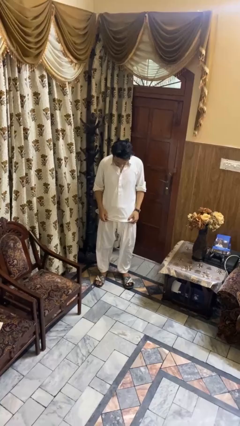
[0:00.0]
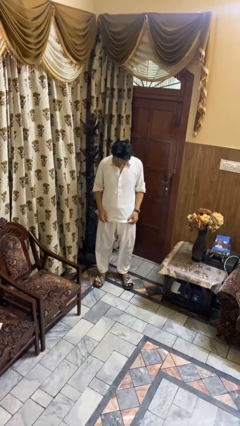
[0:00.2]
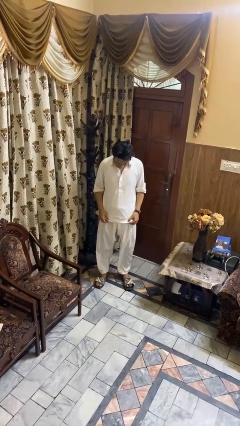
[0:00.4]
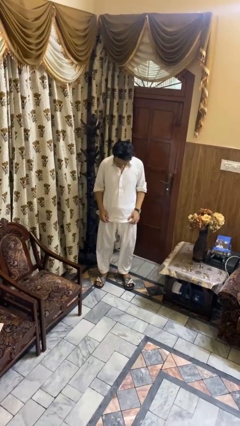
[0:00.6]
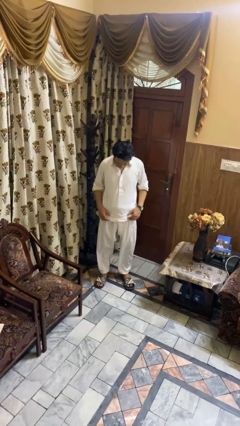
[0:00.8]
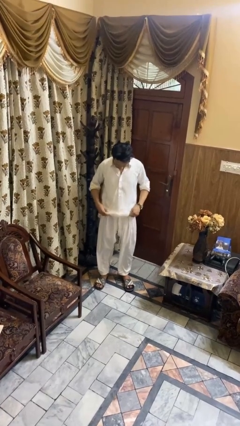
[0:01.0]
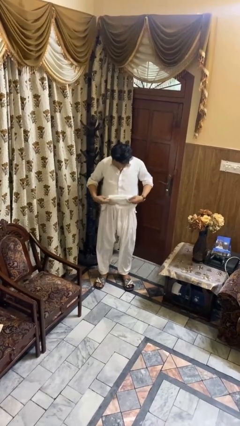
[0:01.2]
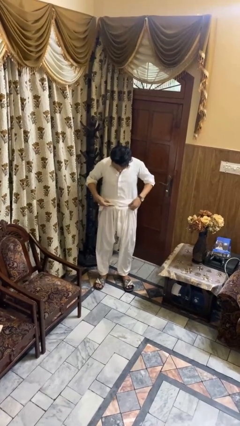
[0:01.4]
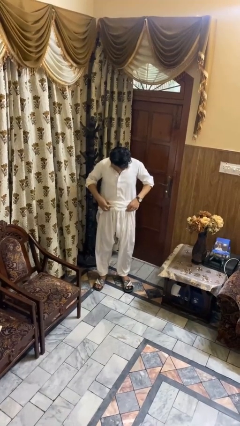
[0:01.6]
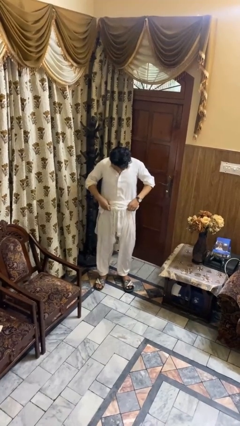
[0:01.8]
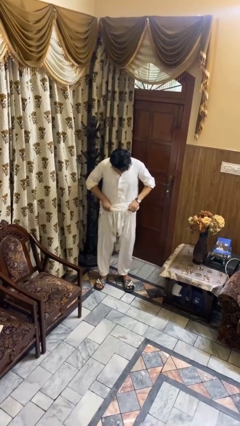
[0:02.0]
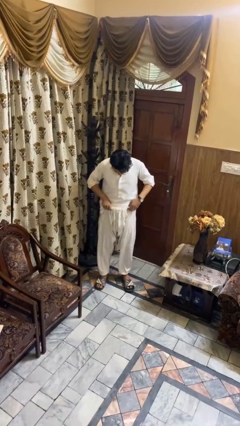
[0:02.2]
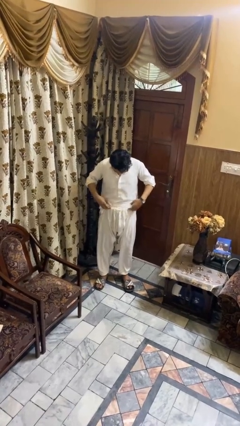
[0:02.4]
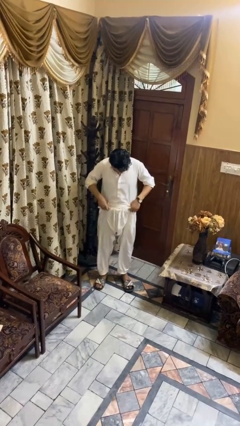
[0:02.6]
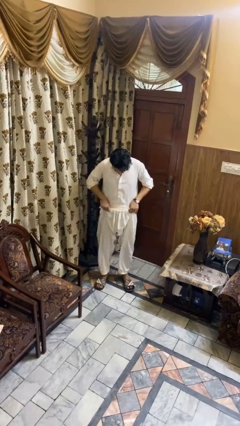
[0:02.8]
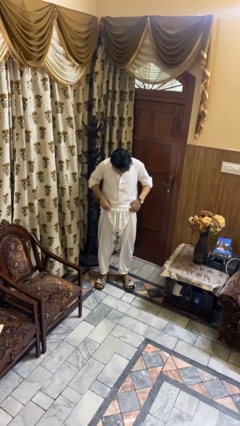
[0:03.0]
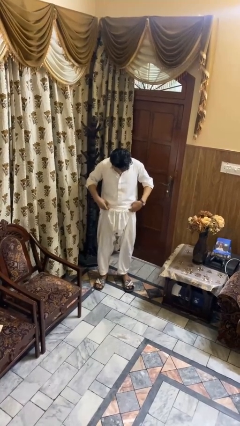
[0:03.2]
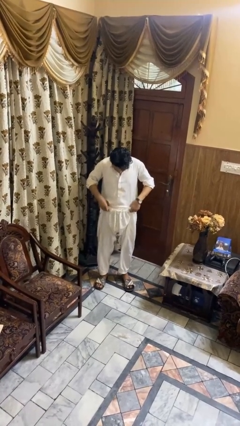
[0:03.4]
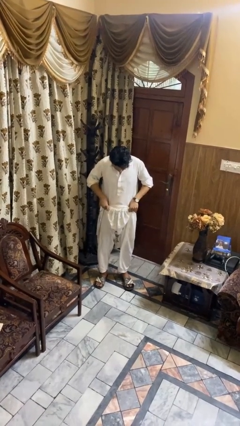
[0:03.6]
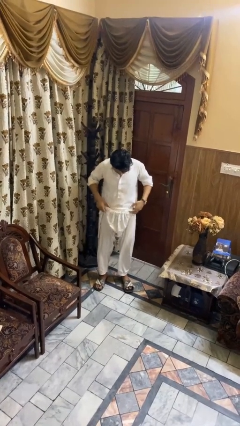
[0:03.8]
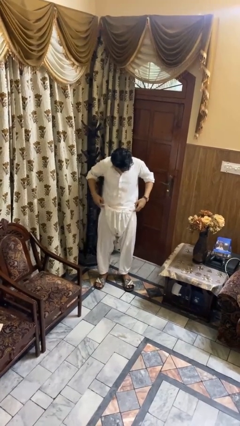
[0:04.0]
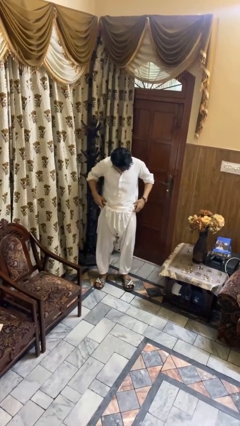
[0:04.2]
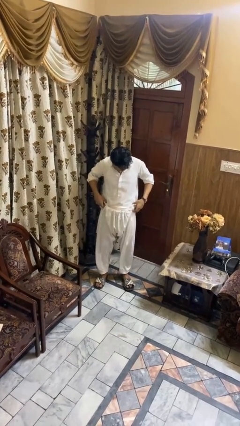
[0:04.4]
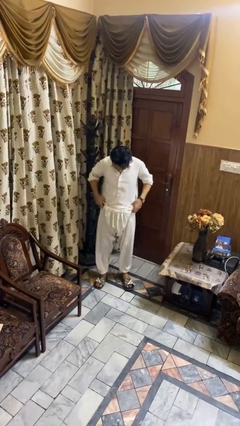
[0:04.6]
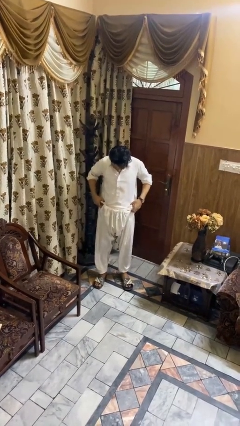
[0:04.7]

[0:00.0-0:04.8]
person tucks in shirt

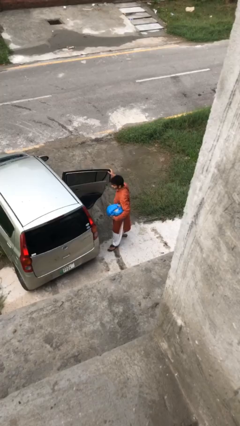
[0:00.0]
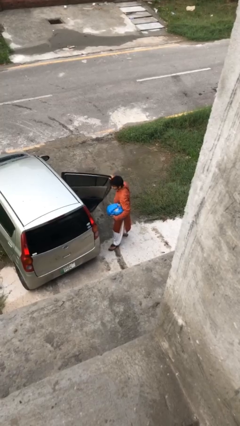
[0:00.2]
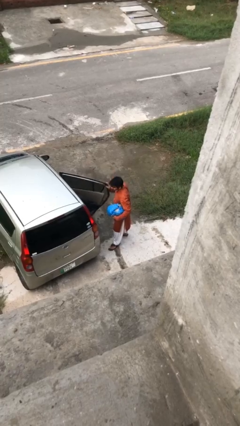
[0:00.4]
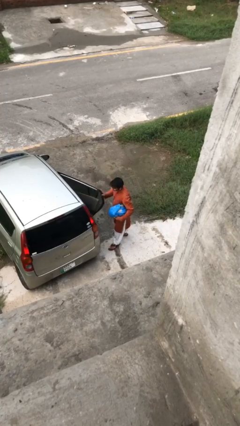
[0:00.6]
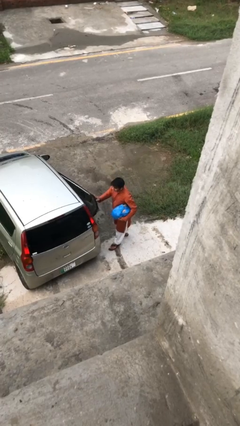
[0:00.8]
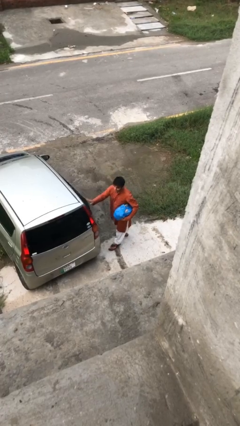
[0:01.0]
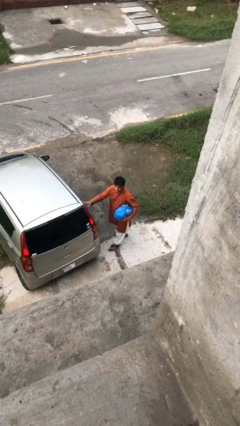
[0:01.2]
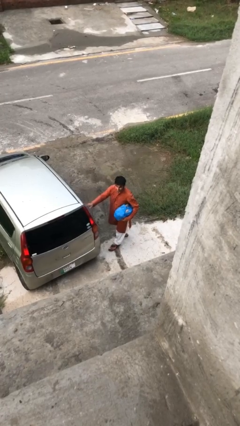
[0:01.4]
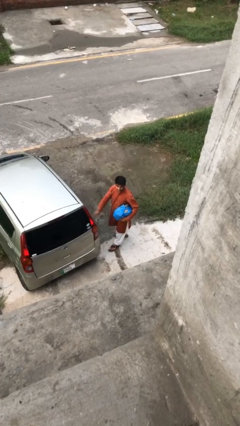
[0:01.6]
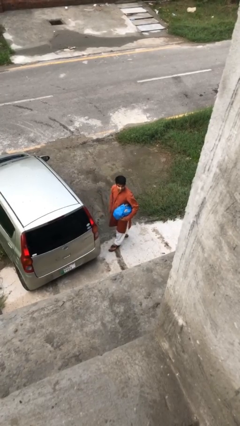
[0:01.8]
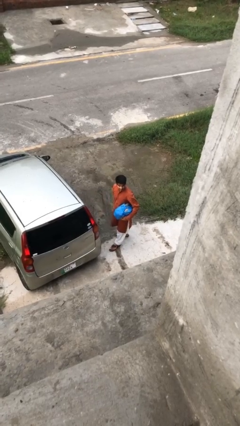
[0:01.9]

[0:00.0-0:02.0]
person closes car door

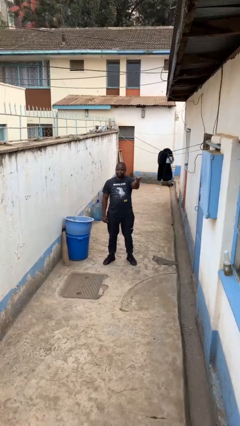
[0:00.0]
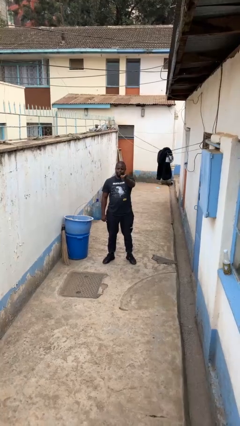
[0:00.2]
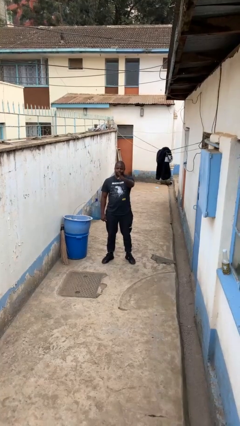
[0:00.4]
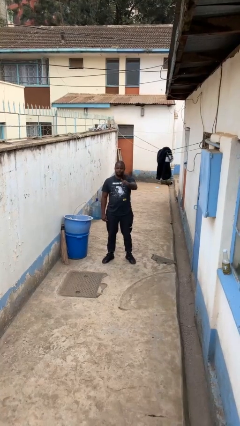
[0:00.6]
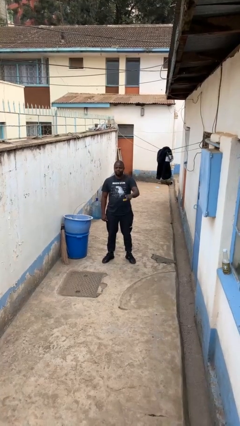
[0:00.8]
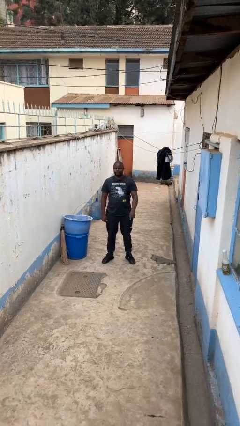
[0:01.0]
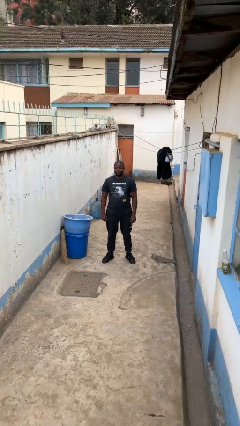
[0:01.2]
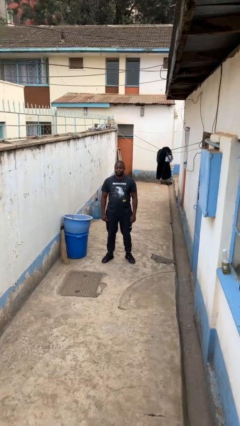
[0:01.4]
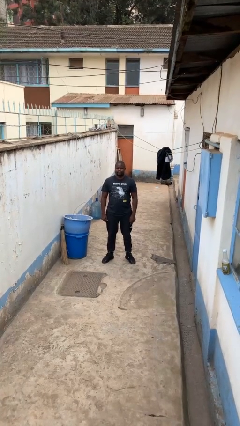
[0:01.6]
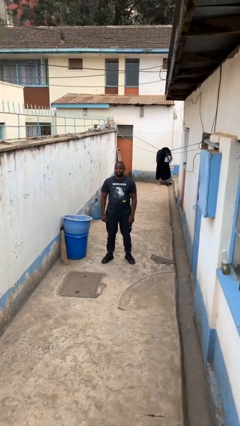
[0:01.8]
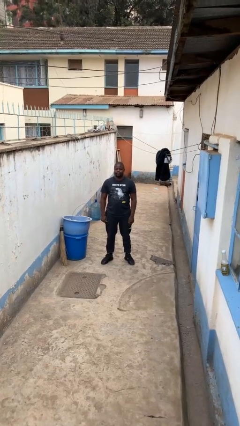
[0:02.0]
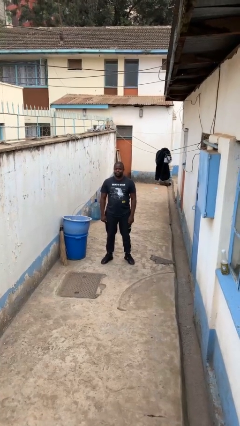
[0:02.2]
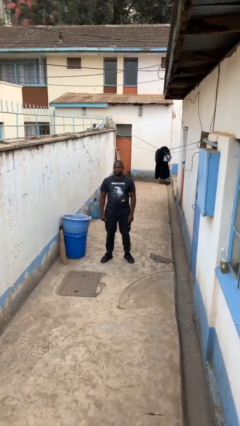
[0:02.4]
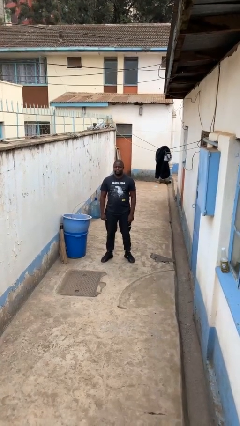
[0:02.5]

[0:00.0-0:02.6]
person gestures swipe right

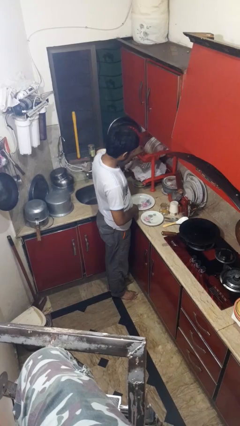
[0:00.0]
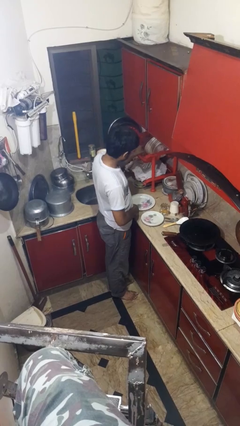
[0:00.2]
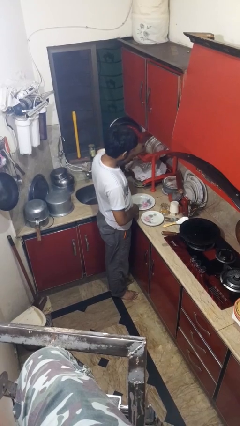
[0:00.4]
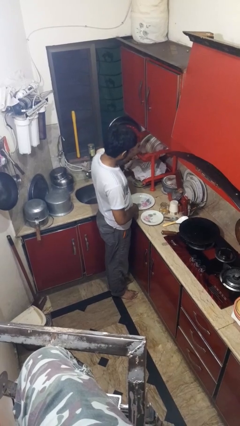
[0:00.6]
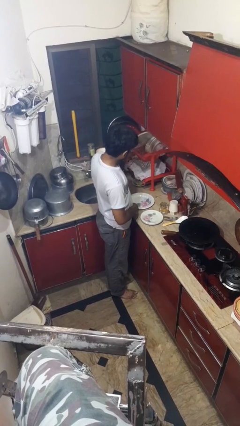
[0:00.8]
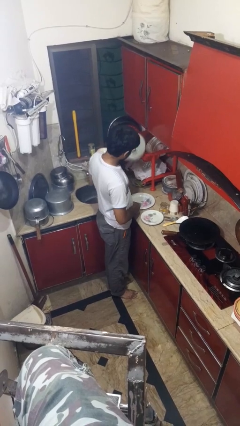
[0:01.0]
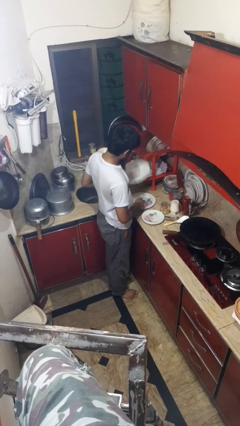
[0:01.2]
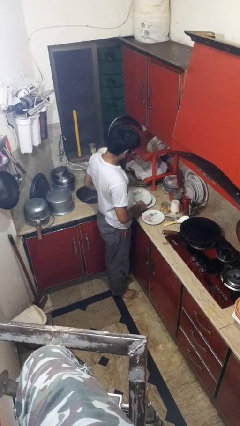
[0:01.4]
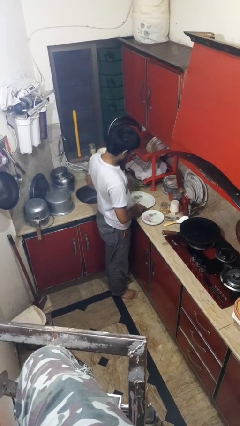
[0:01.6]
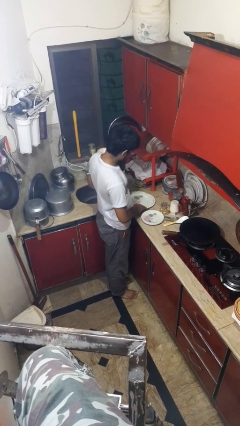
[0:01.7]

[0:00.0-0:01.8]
person unloads dishwasher

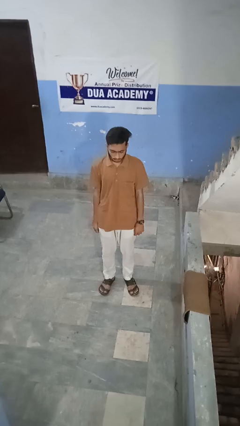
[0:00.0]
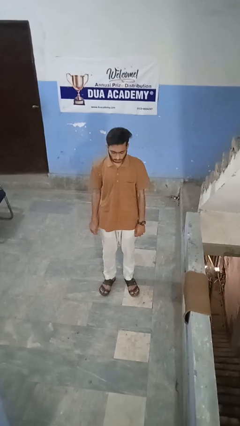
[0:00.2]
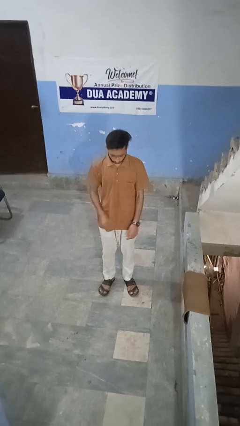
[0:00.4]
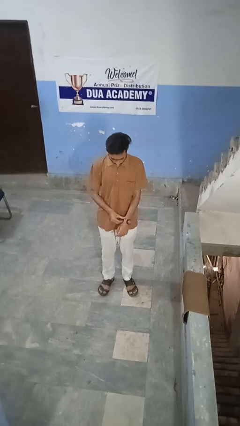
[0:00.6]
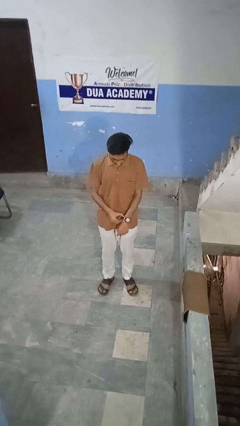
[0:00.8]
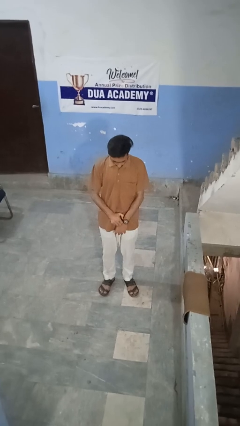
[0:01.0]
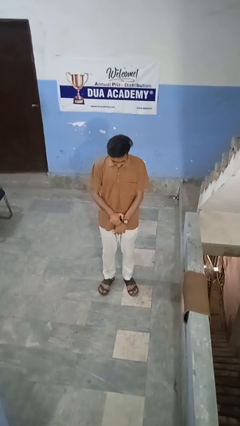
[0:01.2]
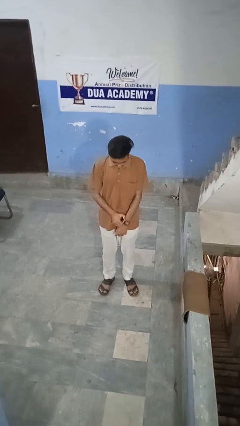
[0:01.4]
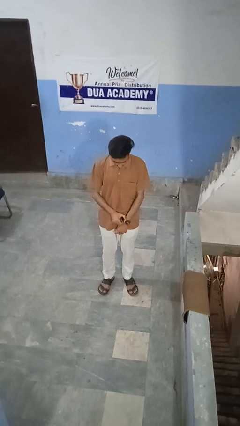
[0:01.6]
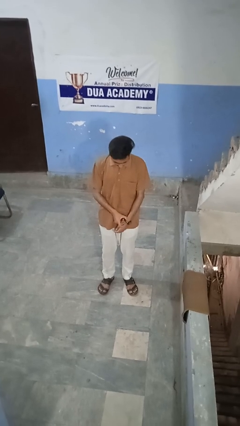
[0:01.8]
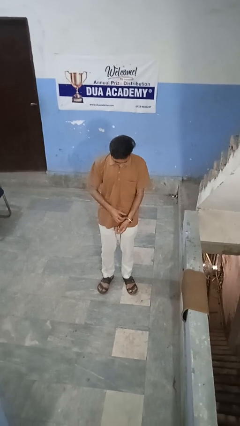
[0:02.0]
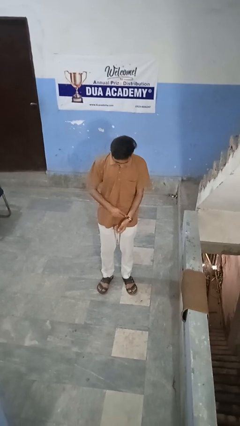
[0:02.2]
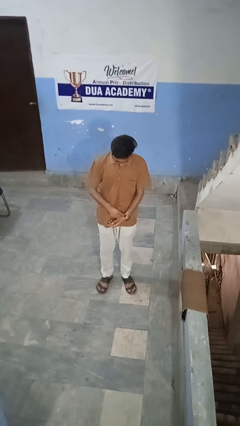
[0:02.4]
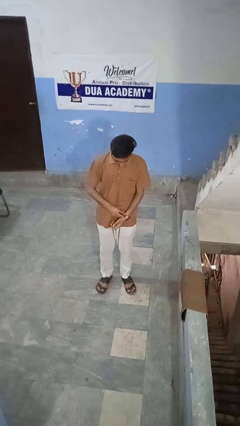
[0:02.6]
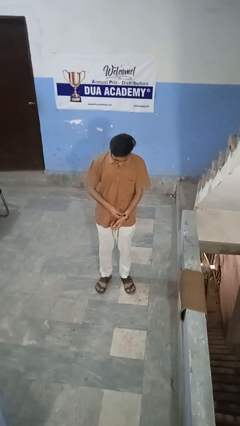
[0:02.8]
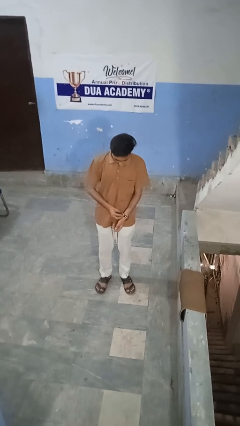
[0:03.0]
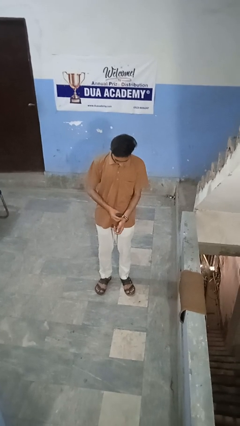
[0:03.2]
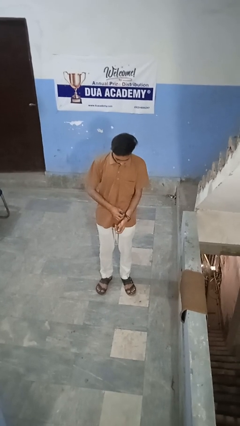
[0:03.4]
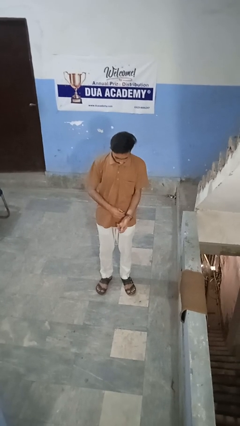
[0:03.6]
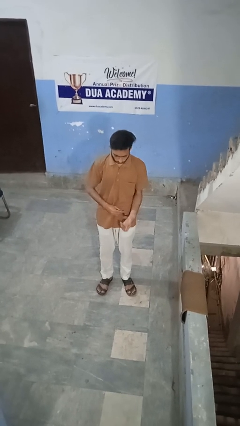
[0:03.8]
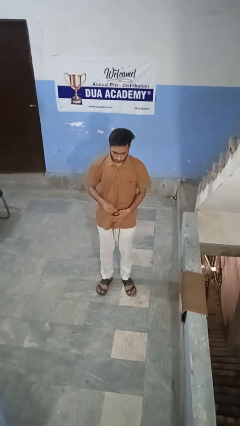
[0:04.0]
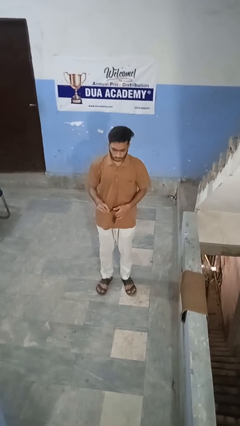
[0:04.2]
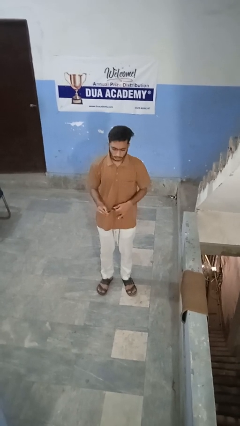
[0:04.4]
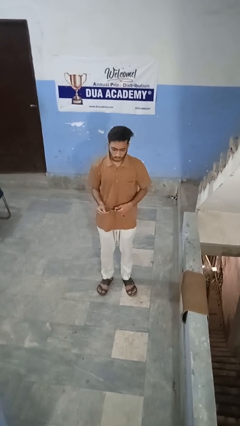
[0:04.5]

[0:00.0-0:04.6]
person takes off wristwatch

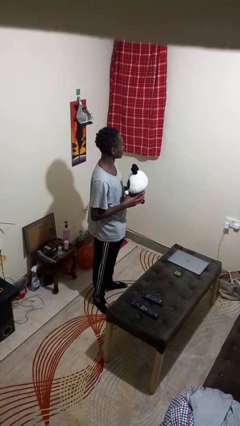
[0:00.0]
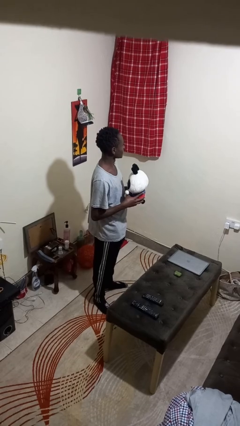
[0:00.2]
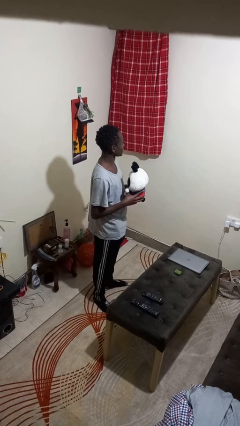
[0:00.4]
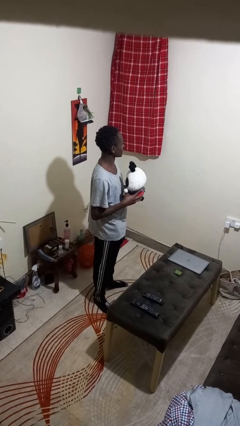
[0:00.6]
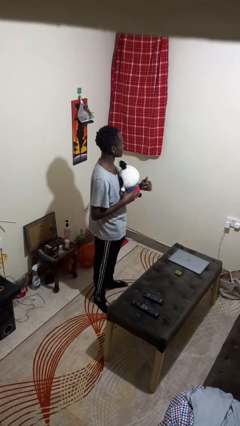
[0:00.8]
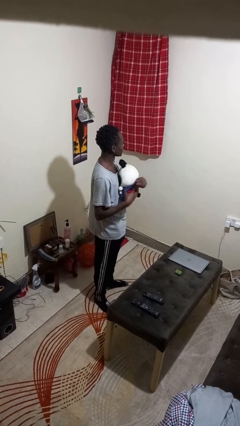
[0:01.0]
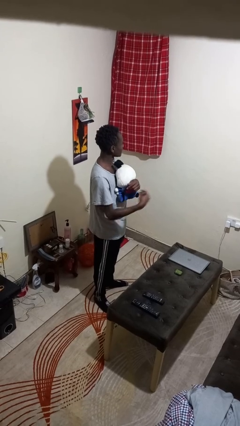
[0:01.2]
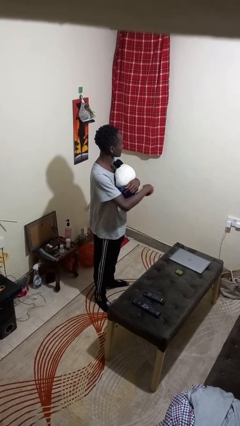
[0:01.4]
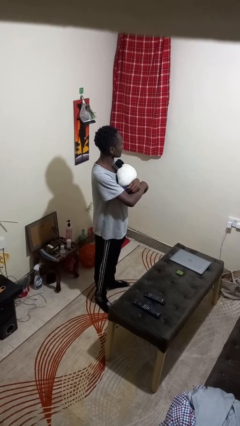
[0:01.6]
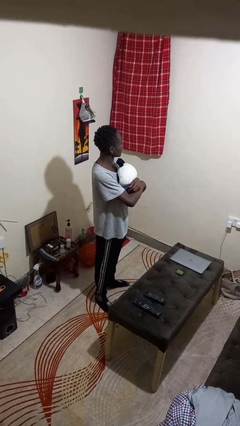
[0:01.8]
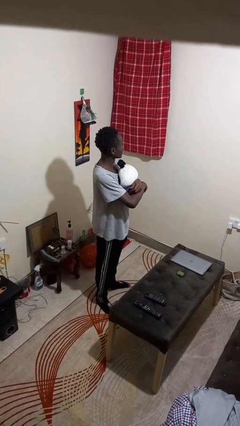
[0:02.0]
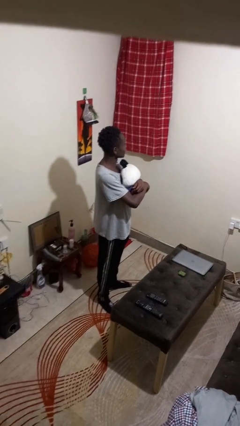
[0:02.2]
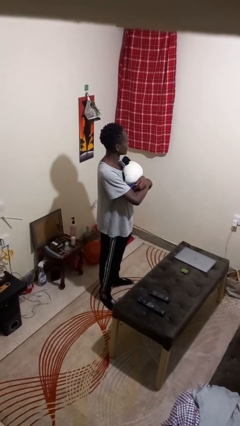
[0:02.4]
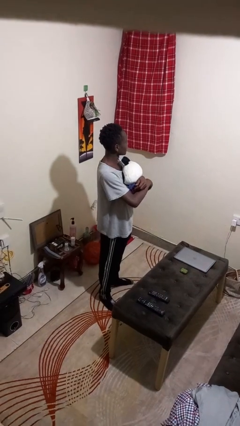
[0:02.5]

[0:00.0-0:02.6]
person hugs stuffed animal
